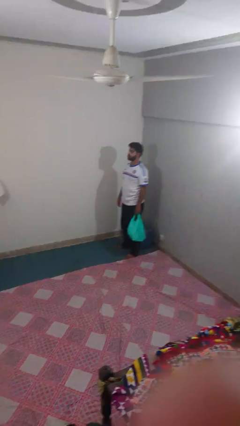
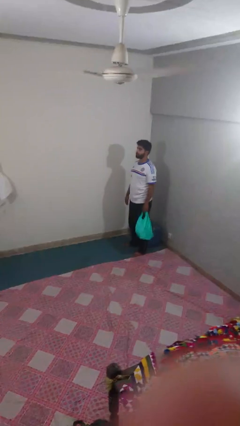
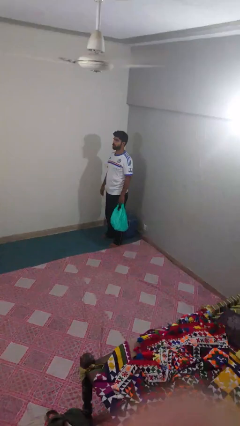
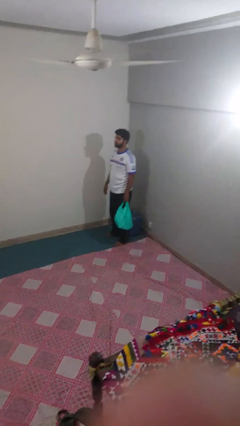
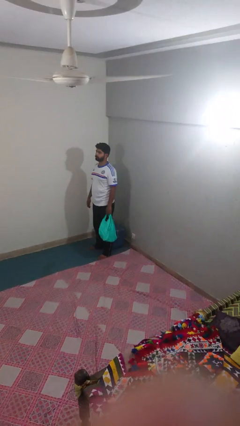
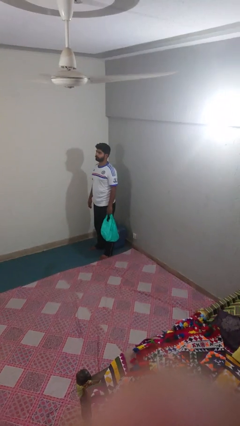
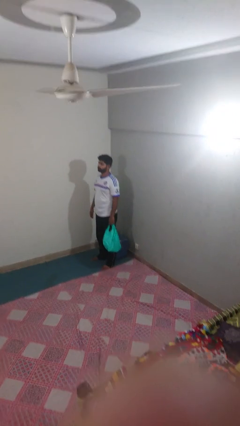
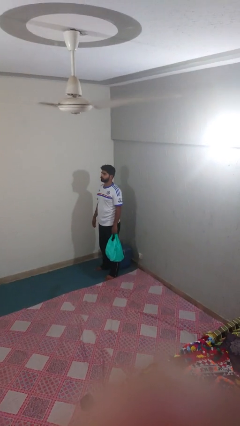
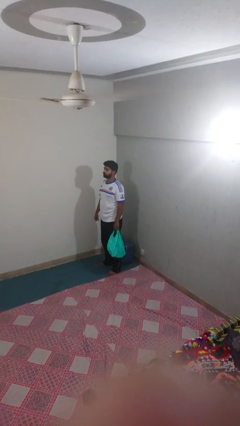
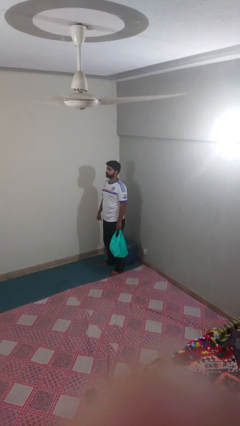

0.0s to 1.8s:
person carries groceries

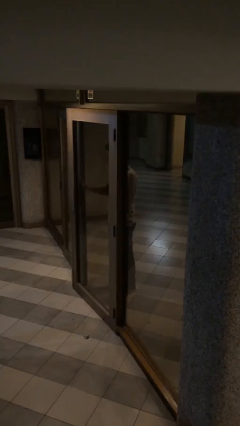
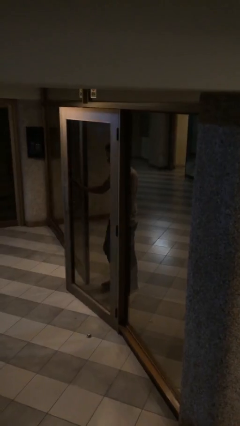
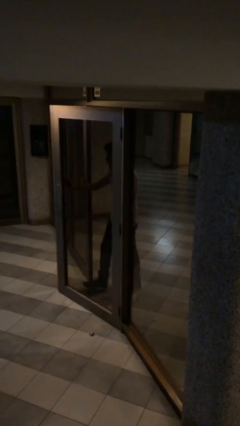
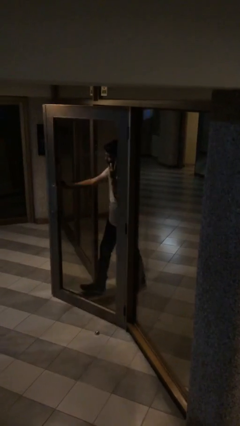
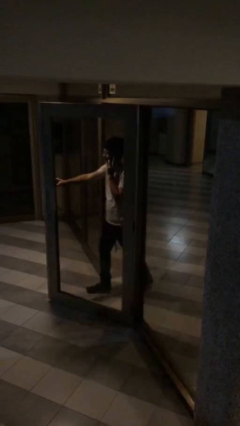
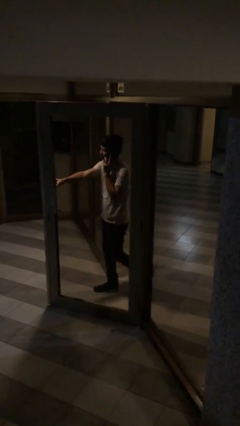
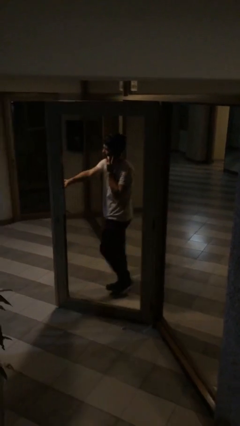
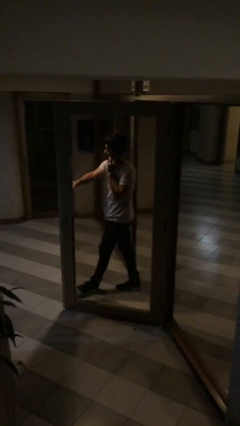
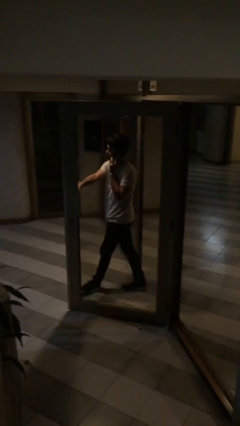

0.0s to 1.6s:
person opens facility door

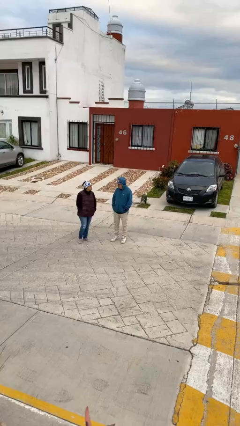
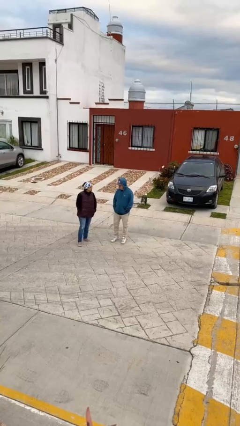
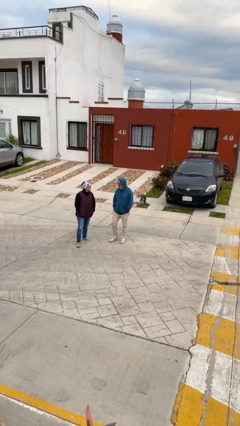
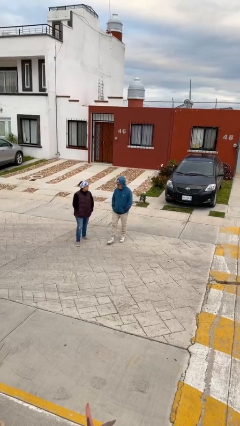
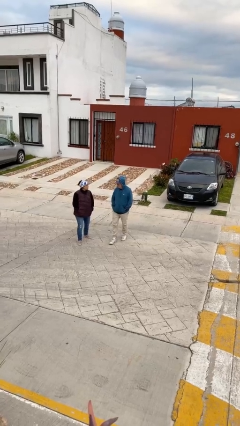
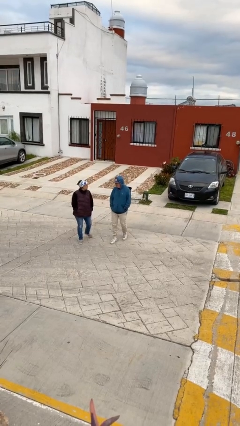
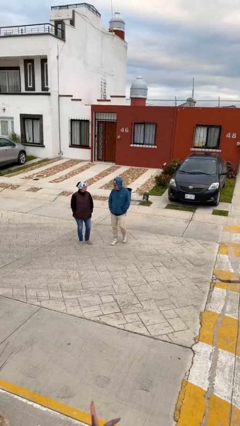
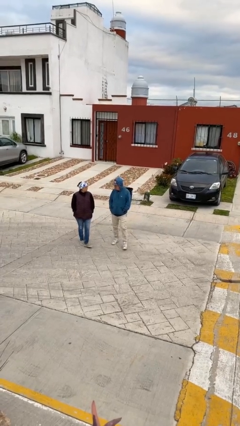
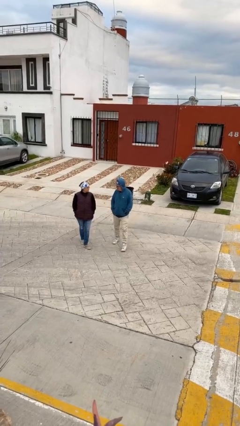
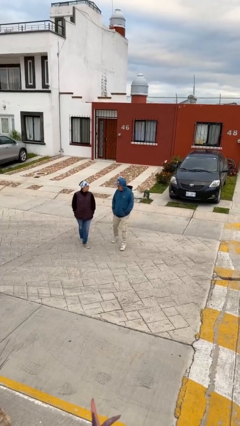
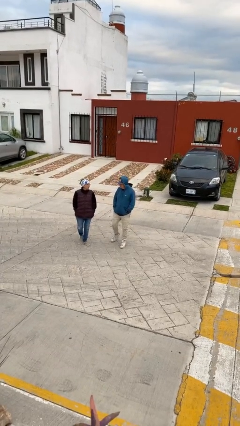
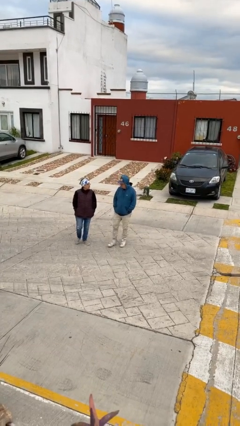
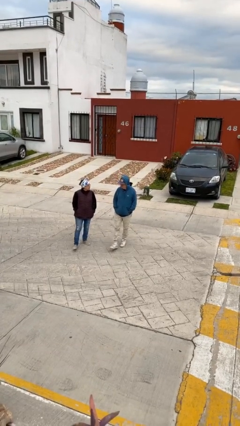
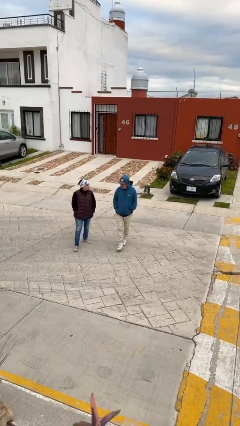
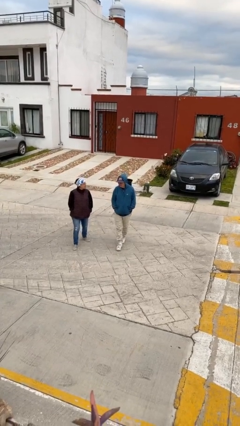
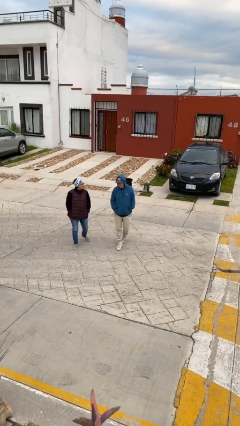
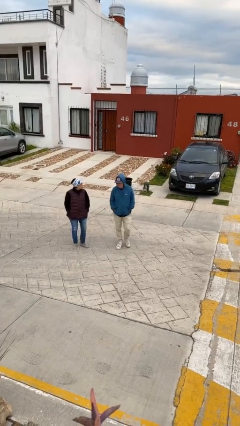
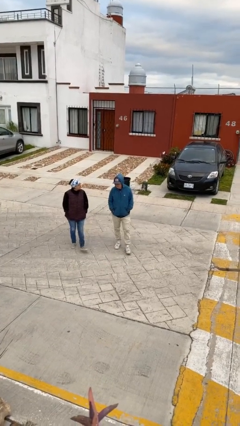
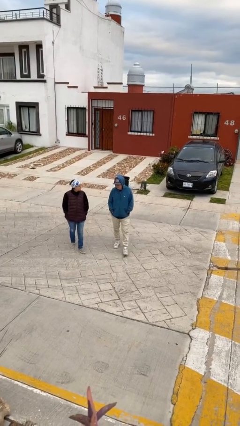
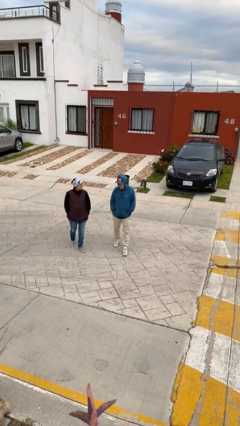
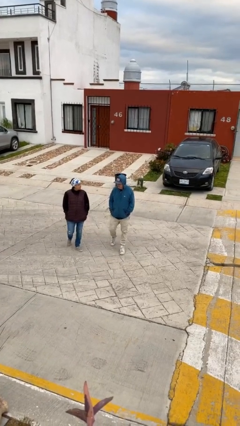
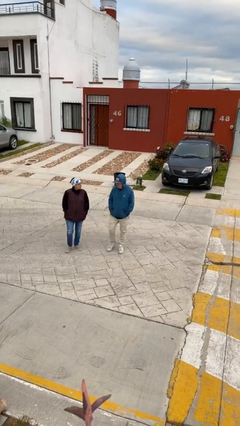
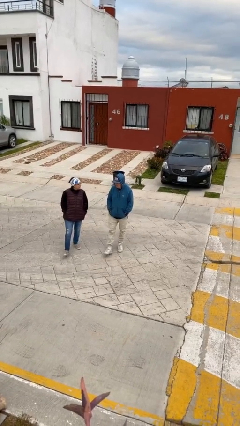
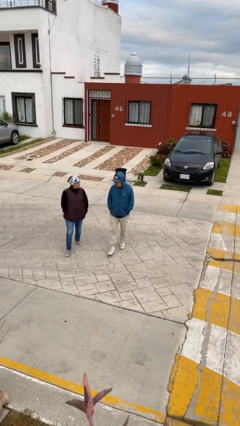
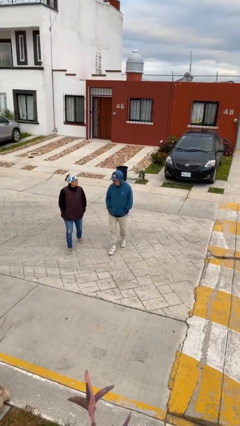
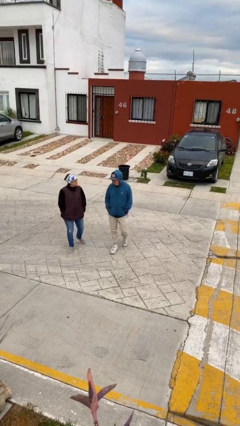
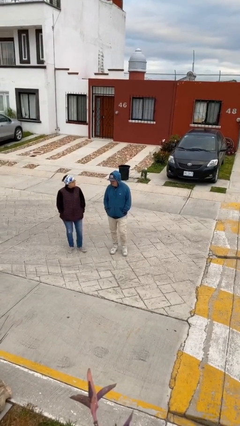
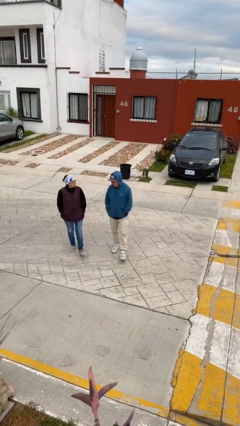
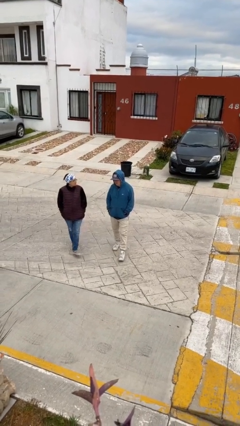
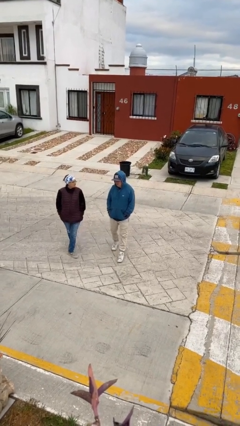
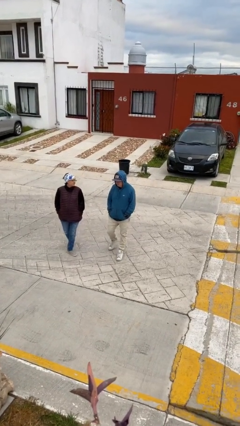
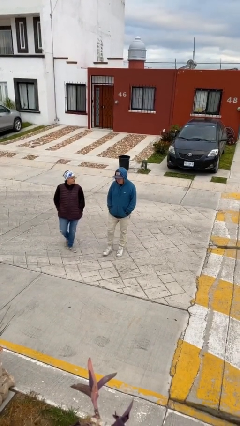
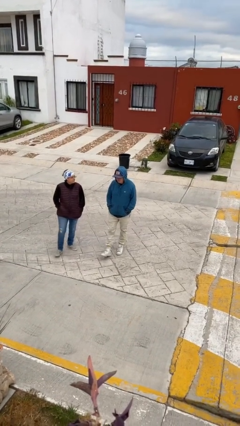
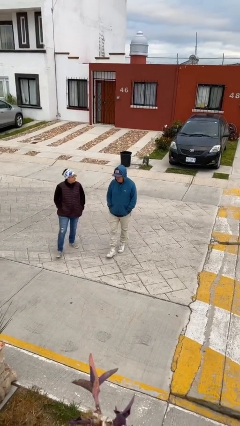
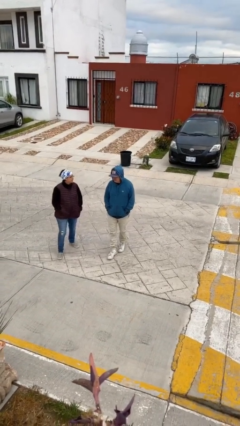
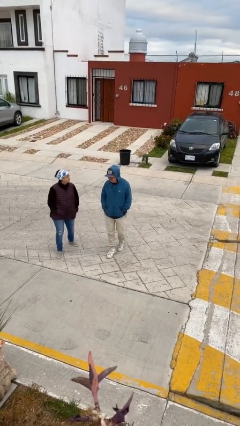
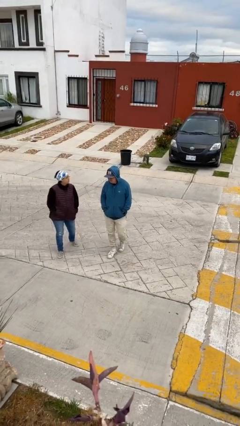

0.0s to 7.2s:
person talks to person

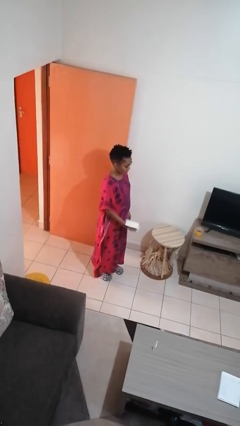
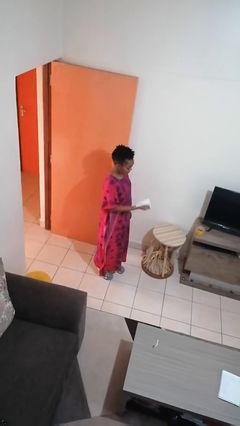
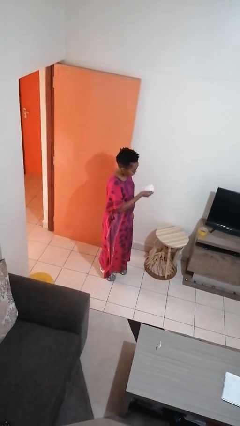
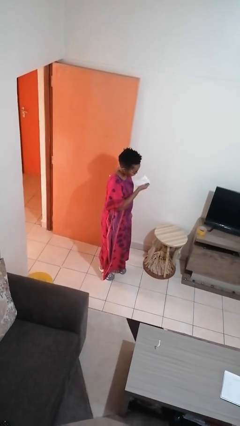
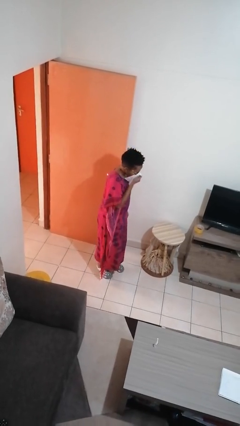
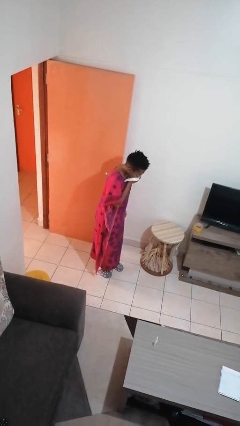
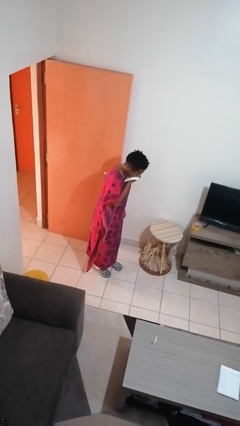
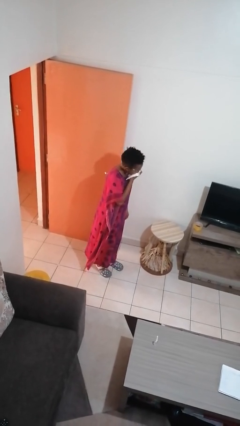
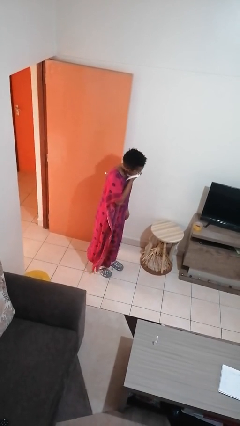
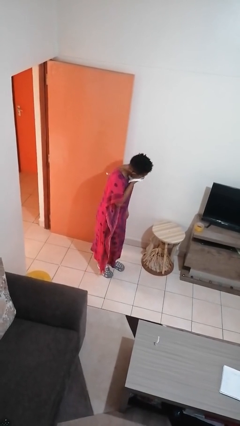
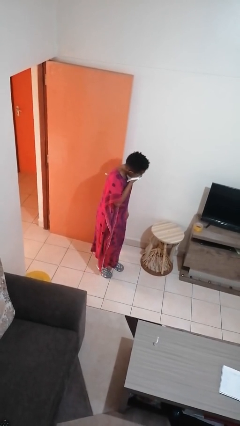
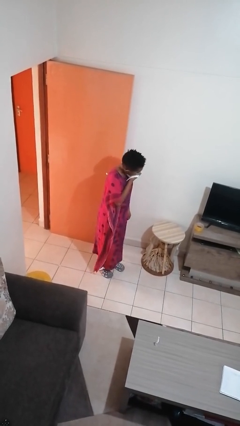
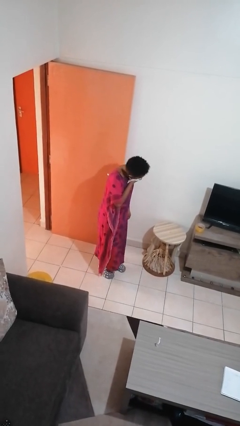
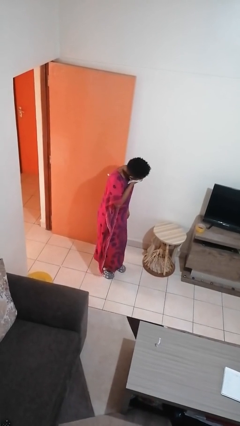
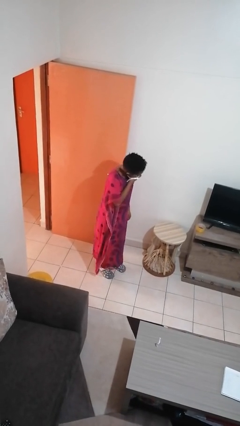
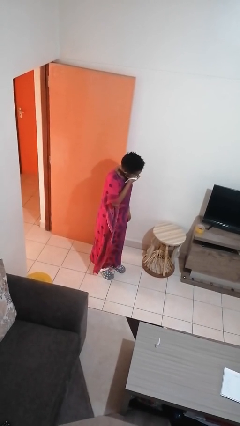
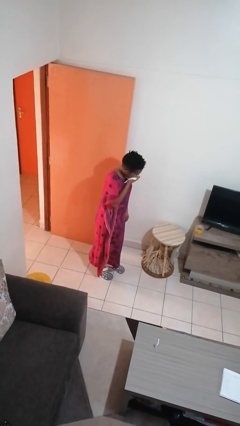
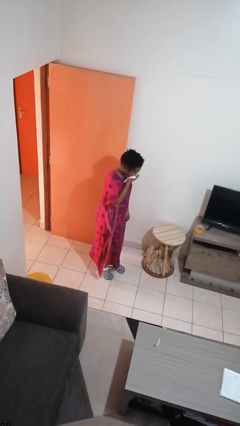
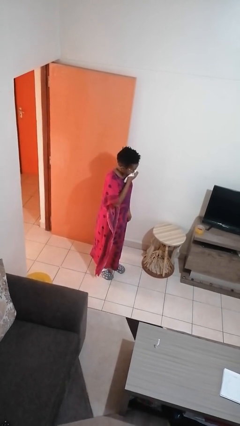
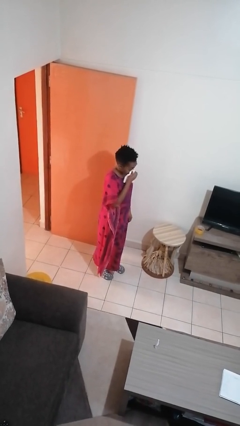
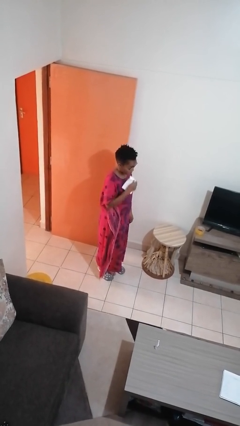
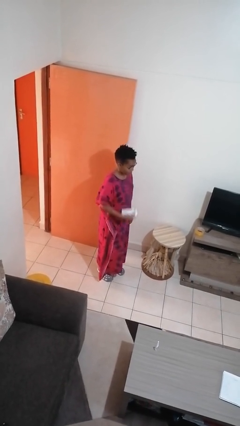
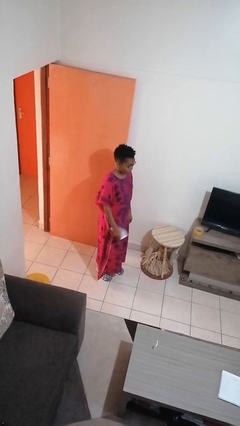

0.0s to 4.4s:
person blows nose
